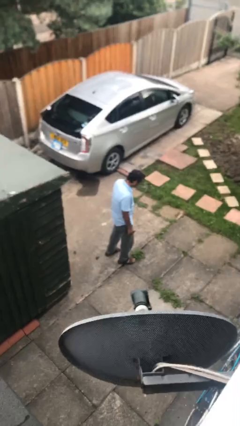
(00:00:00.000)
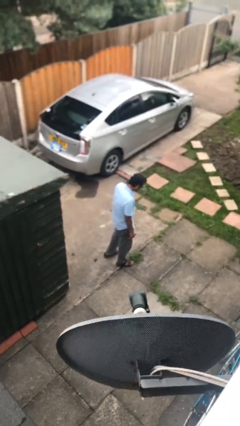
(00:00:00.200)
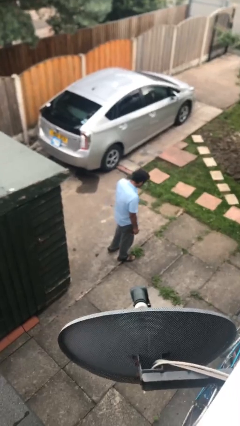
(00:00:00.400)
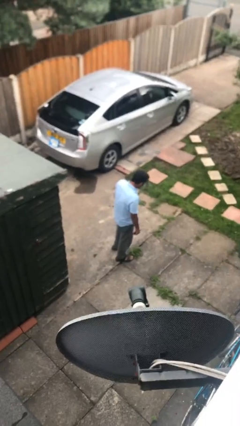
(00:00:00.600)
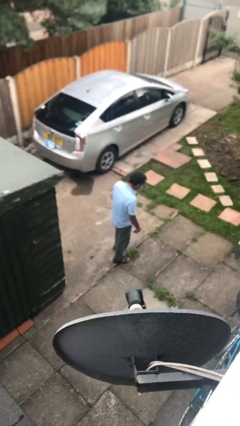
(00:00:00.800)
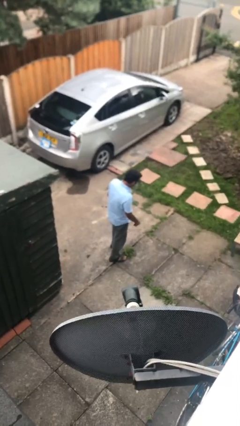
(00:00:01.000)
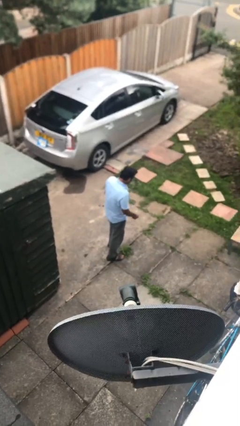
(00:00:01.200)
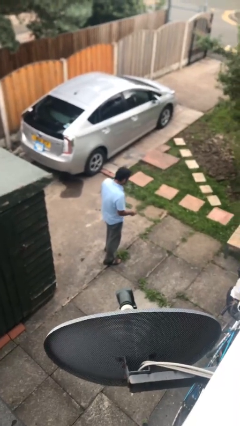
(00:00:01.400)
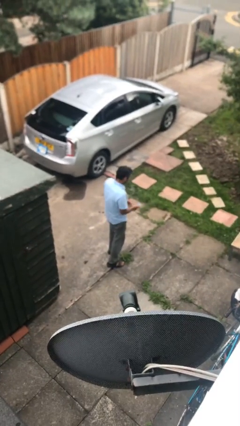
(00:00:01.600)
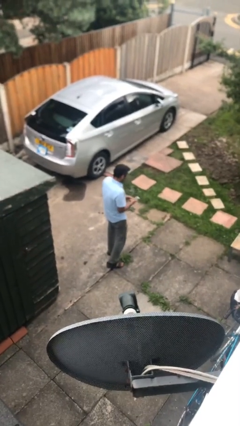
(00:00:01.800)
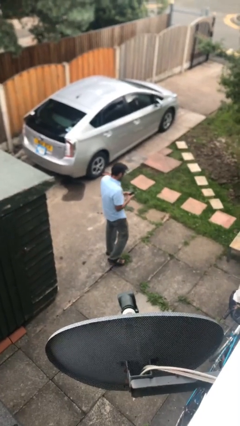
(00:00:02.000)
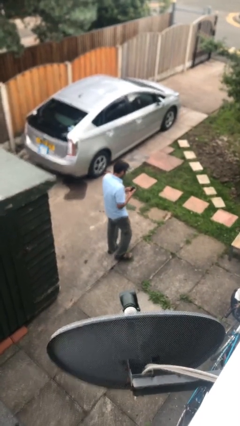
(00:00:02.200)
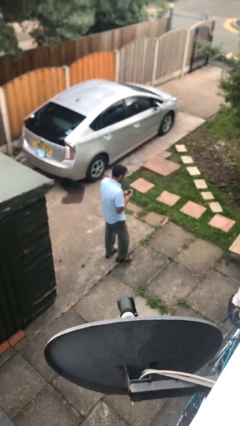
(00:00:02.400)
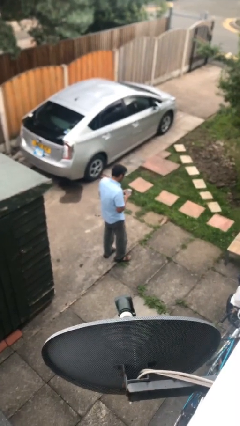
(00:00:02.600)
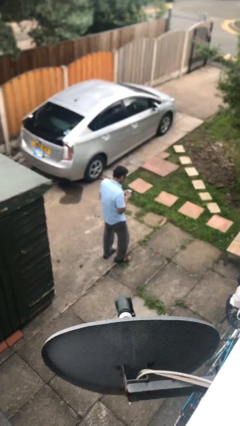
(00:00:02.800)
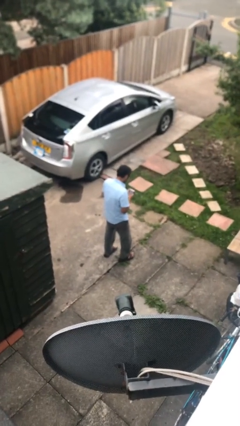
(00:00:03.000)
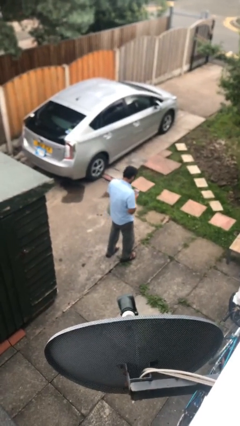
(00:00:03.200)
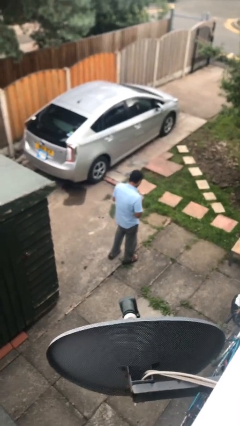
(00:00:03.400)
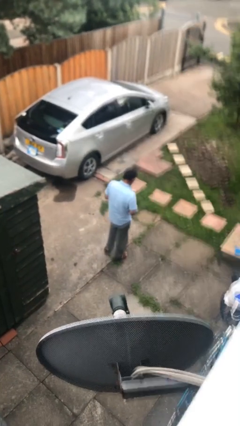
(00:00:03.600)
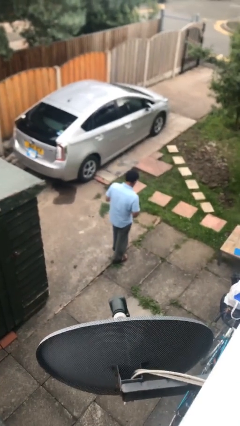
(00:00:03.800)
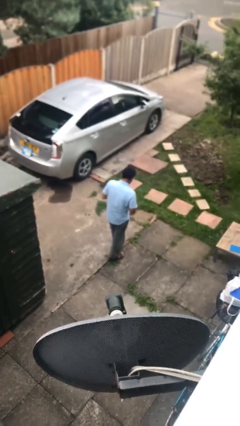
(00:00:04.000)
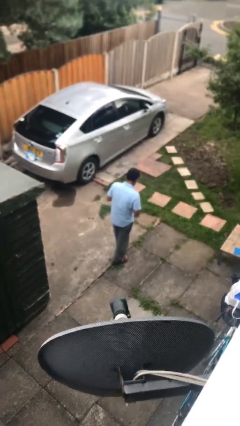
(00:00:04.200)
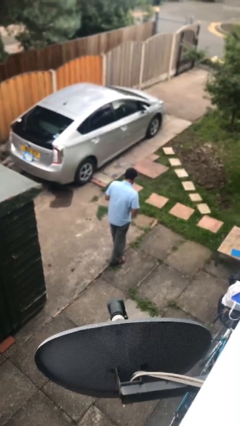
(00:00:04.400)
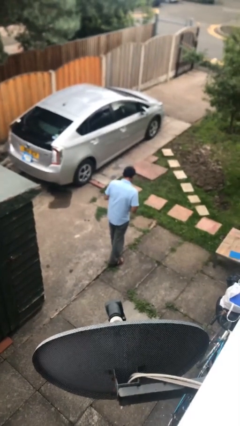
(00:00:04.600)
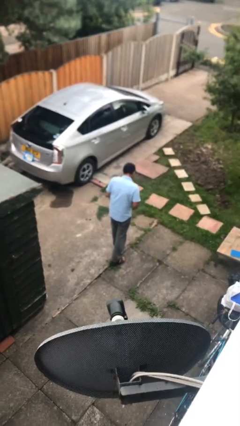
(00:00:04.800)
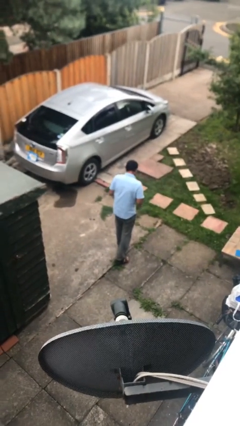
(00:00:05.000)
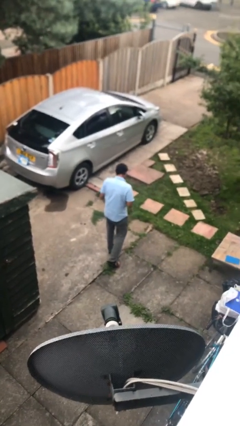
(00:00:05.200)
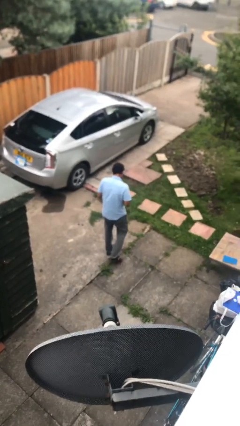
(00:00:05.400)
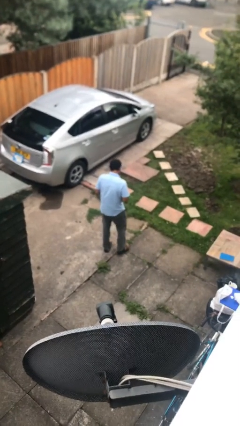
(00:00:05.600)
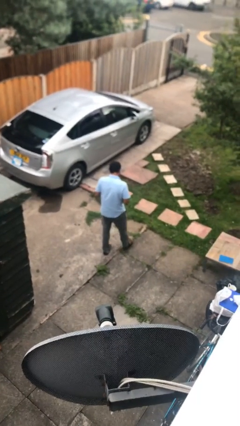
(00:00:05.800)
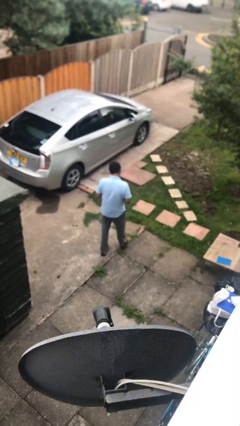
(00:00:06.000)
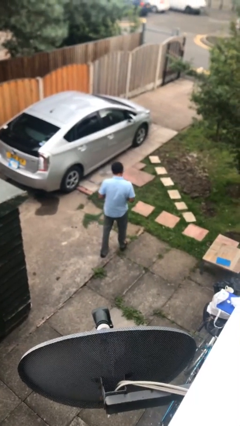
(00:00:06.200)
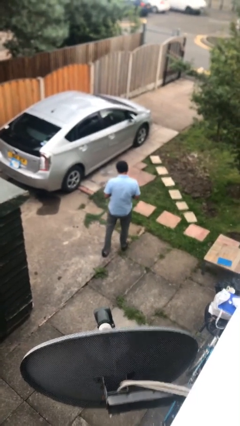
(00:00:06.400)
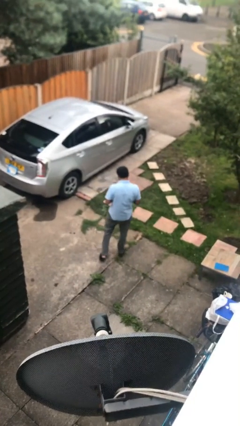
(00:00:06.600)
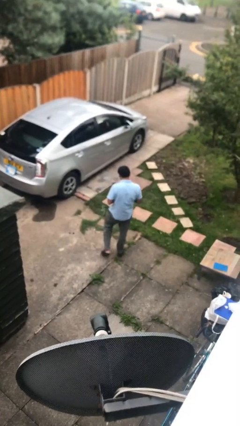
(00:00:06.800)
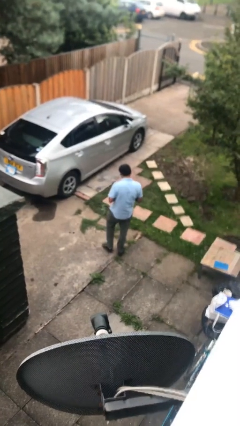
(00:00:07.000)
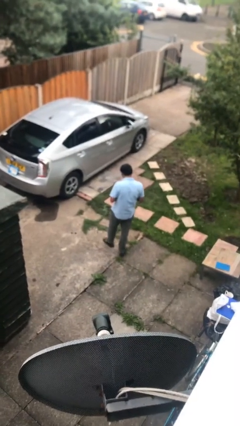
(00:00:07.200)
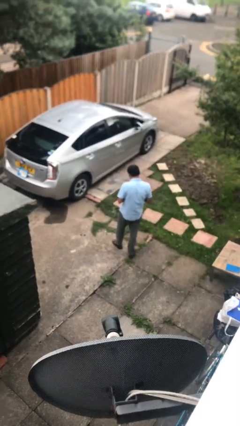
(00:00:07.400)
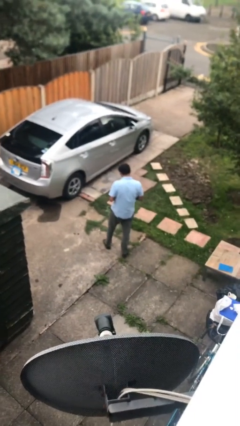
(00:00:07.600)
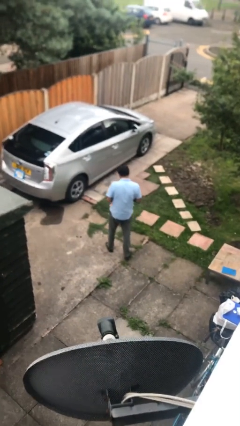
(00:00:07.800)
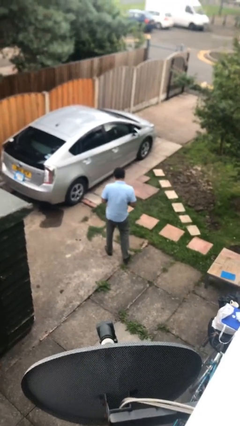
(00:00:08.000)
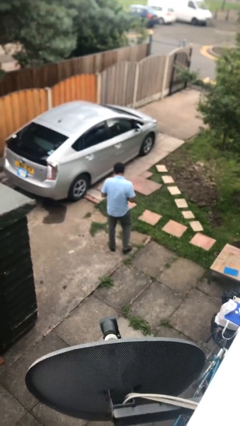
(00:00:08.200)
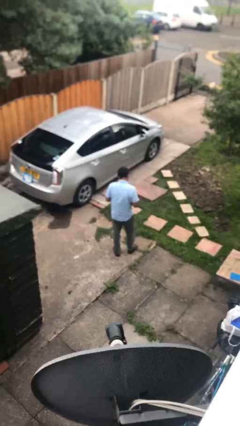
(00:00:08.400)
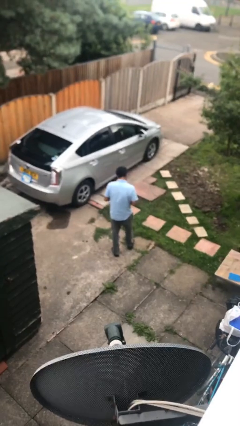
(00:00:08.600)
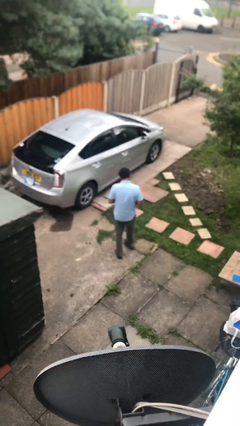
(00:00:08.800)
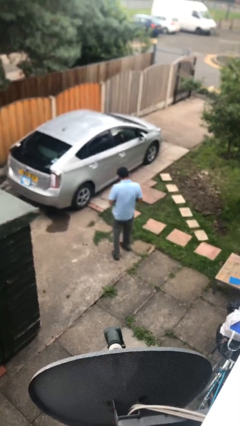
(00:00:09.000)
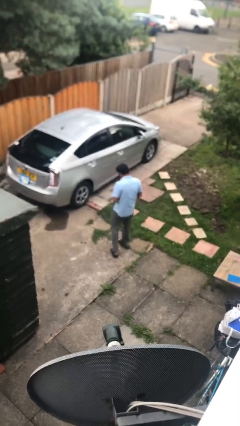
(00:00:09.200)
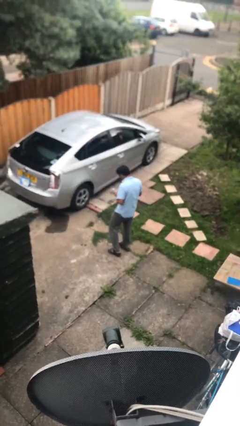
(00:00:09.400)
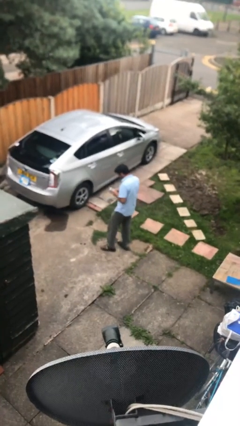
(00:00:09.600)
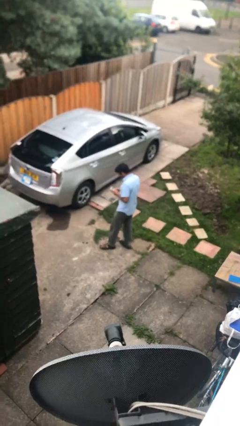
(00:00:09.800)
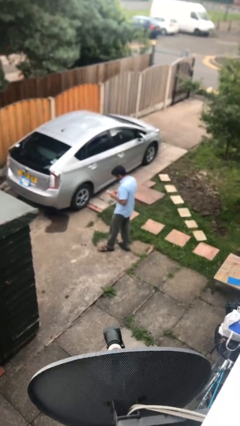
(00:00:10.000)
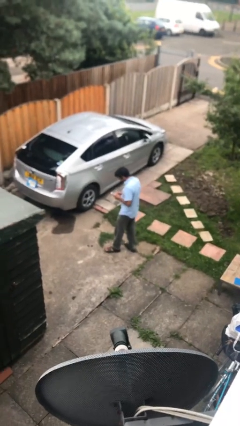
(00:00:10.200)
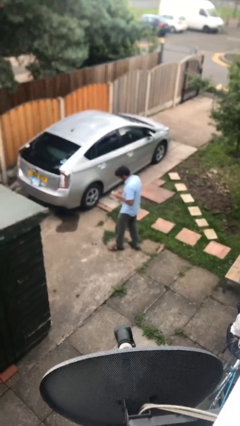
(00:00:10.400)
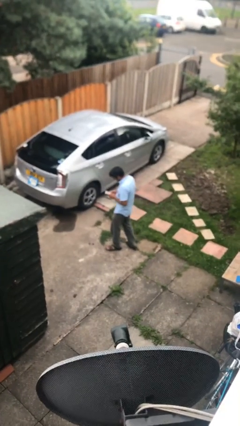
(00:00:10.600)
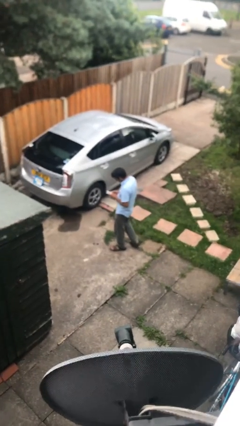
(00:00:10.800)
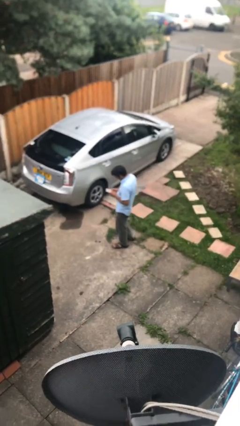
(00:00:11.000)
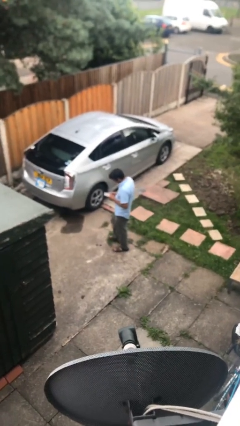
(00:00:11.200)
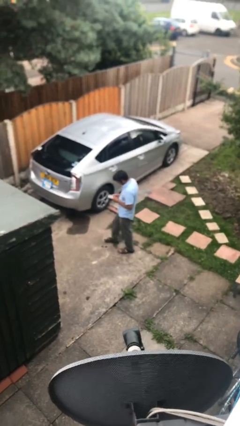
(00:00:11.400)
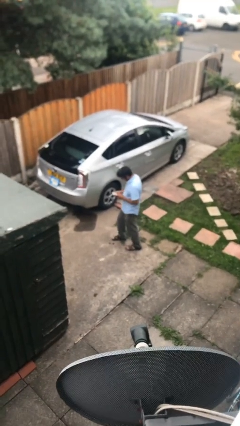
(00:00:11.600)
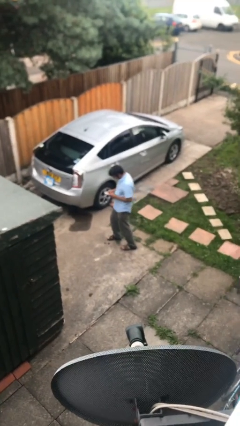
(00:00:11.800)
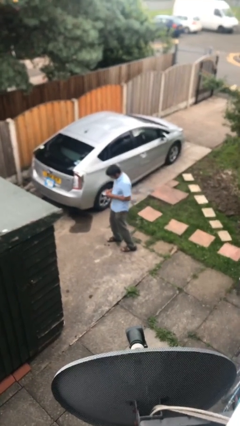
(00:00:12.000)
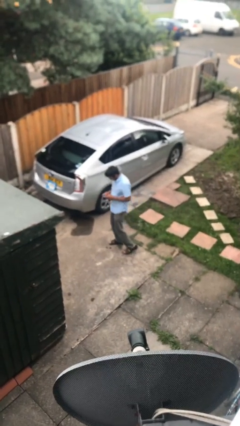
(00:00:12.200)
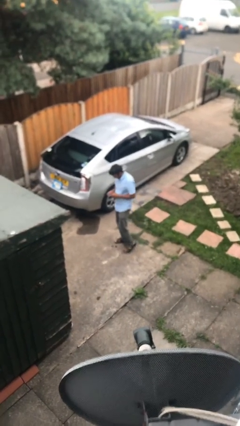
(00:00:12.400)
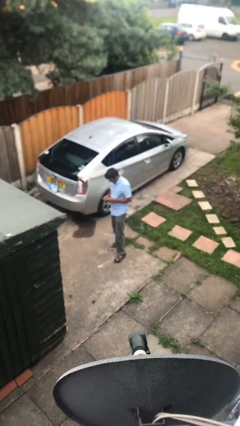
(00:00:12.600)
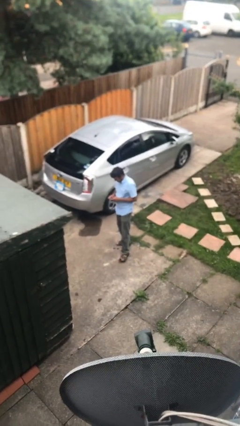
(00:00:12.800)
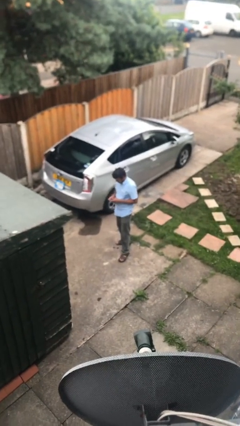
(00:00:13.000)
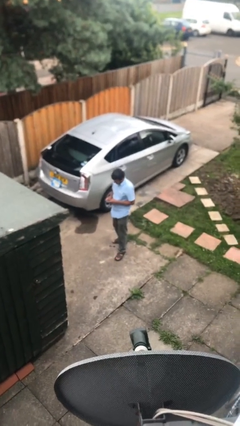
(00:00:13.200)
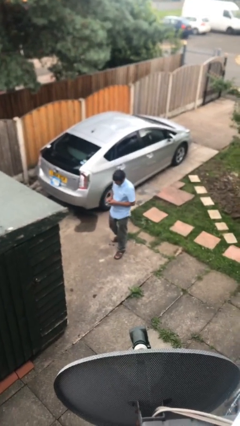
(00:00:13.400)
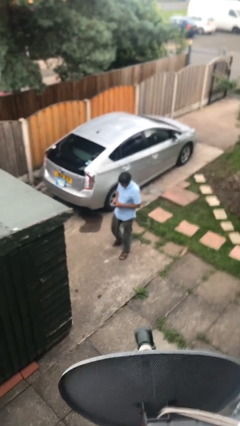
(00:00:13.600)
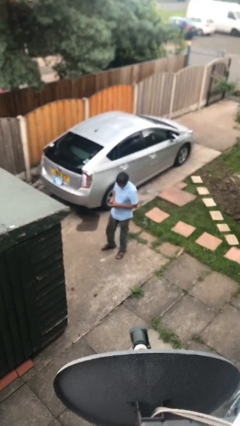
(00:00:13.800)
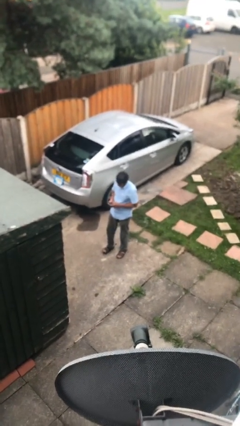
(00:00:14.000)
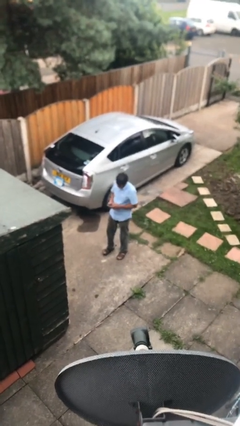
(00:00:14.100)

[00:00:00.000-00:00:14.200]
person texts on phone

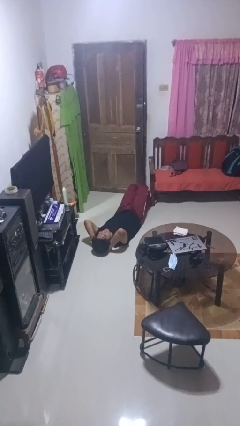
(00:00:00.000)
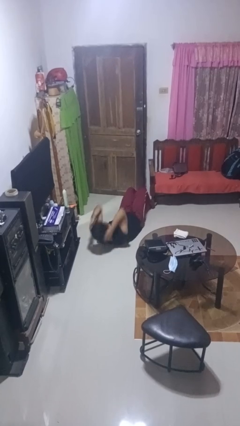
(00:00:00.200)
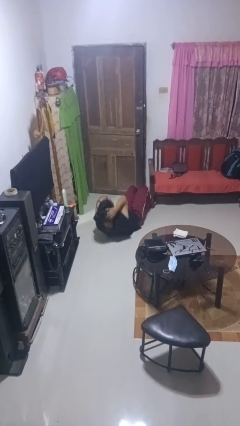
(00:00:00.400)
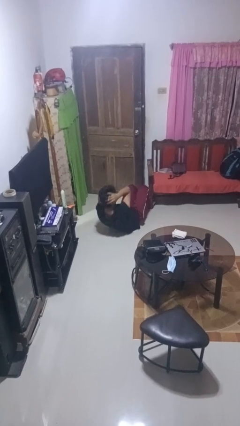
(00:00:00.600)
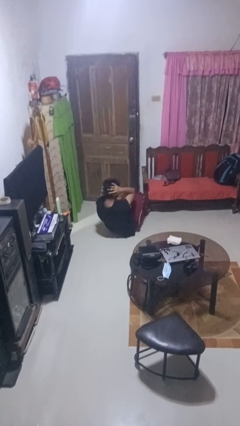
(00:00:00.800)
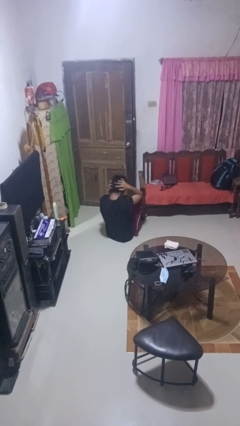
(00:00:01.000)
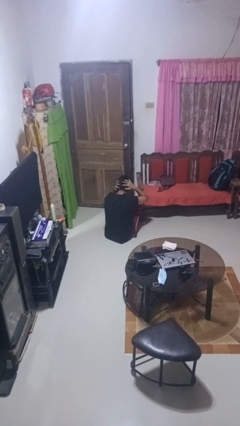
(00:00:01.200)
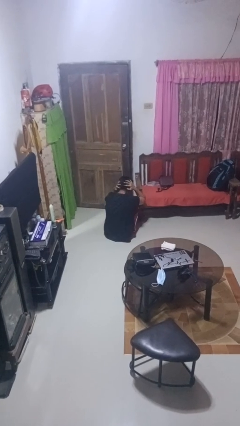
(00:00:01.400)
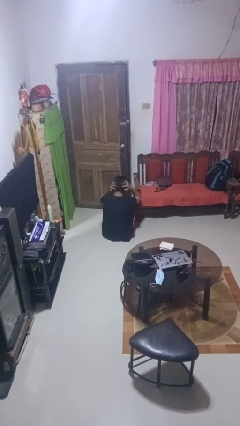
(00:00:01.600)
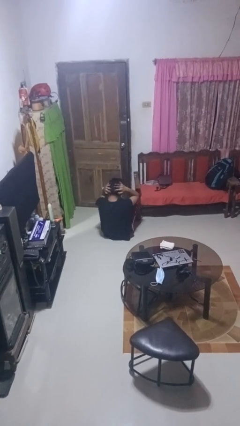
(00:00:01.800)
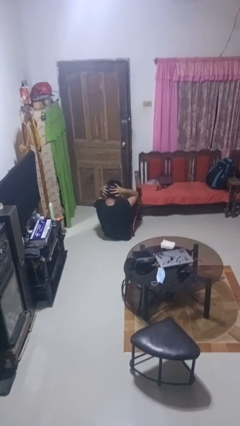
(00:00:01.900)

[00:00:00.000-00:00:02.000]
person exercises with situp

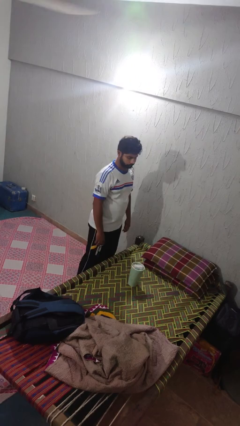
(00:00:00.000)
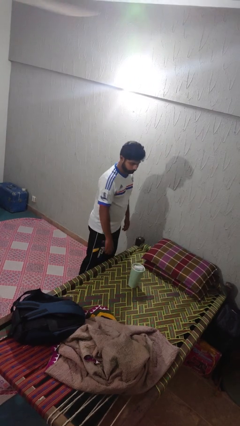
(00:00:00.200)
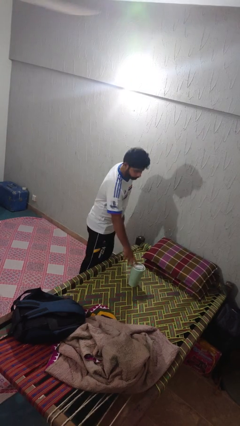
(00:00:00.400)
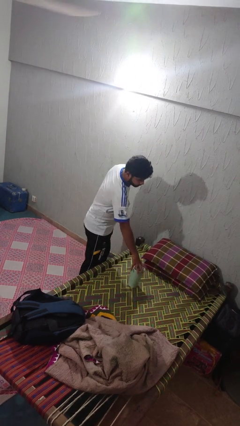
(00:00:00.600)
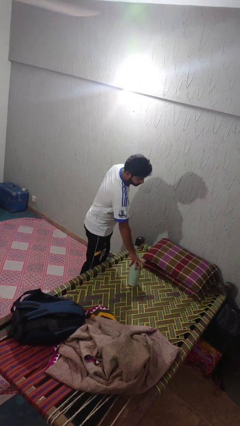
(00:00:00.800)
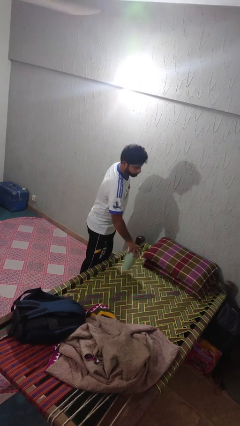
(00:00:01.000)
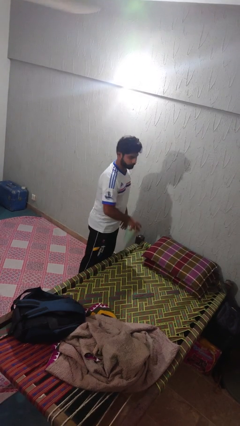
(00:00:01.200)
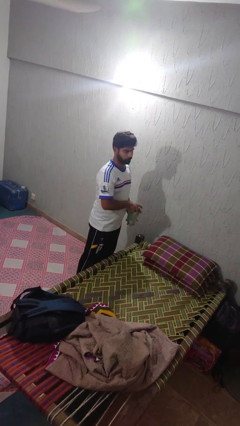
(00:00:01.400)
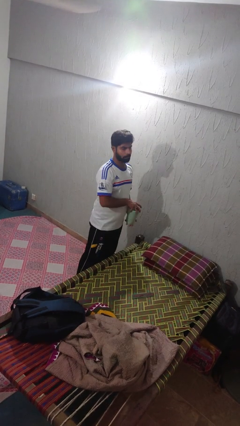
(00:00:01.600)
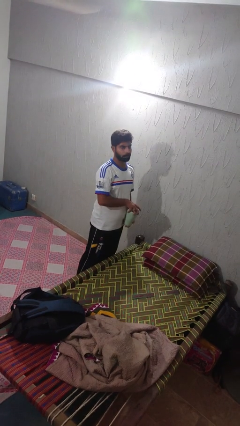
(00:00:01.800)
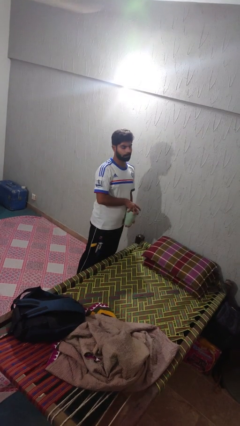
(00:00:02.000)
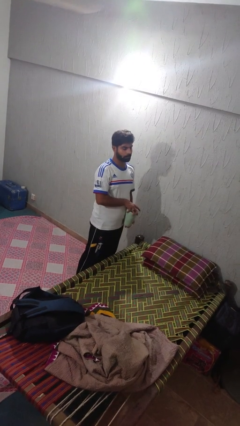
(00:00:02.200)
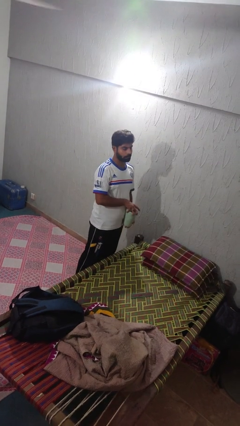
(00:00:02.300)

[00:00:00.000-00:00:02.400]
person picks up object from bed
